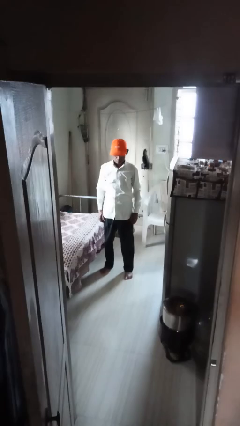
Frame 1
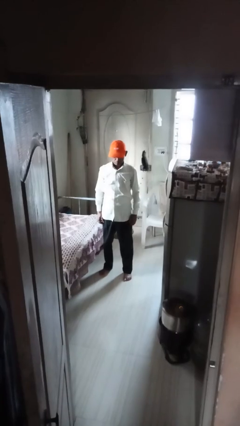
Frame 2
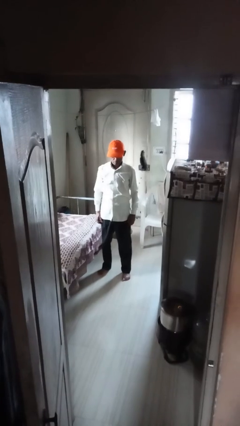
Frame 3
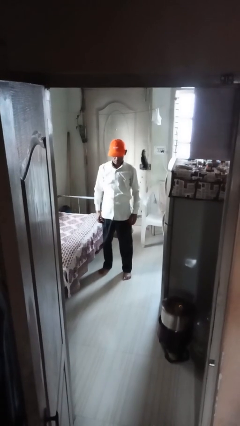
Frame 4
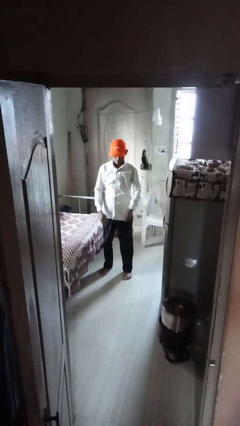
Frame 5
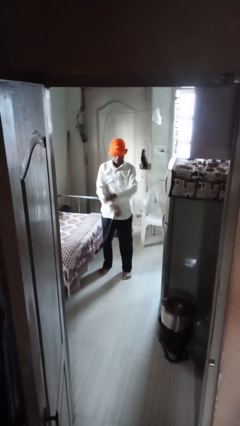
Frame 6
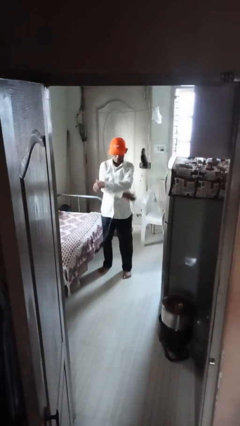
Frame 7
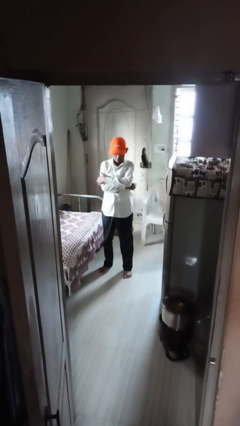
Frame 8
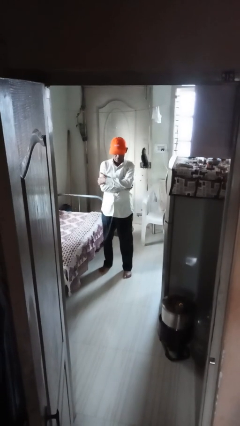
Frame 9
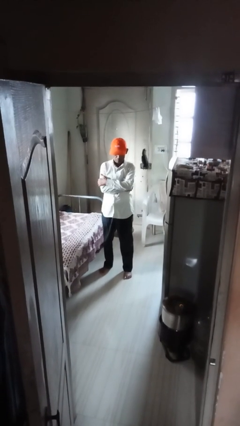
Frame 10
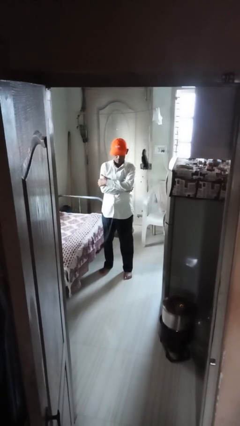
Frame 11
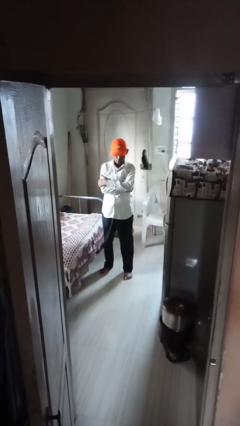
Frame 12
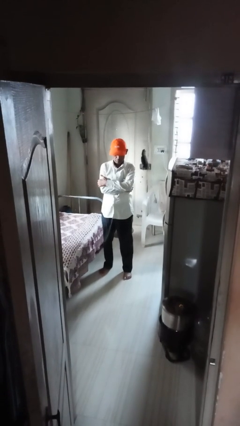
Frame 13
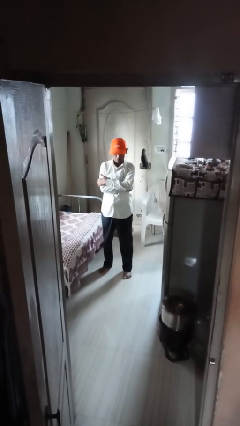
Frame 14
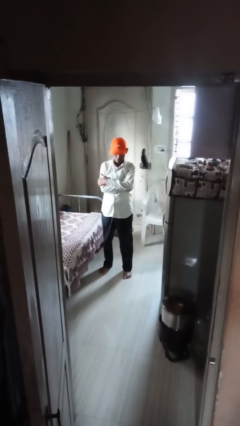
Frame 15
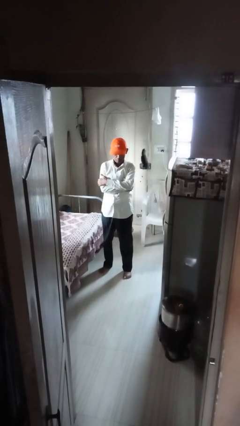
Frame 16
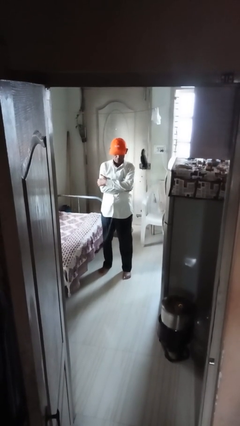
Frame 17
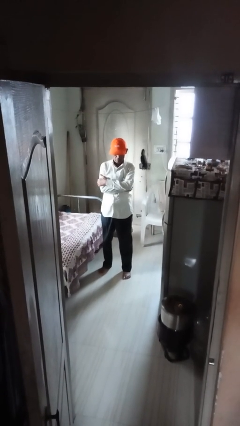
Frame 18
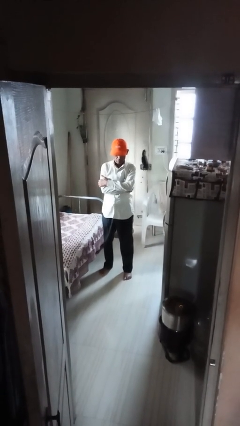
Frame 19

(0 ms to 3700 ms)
person crosses arms

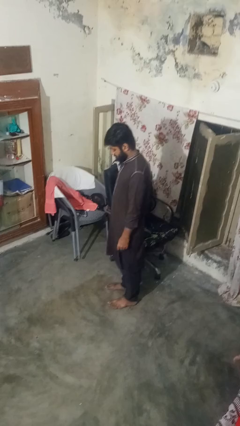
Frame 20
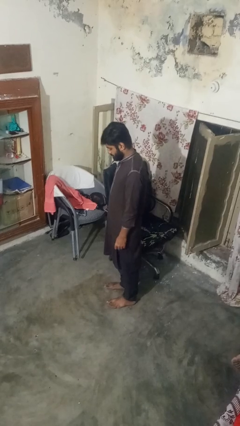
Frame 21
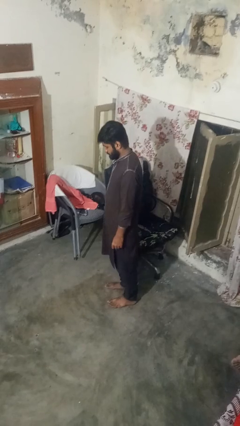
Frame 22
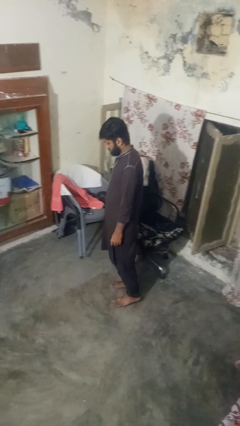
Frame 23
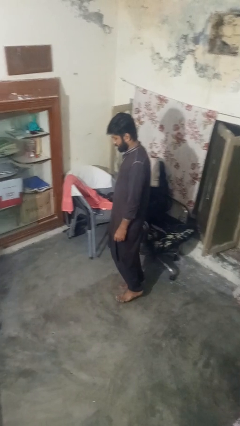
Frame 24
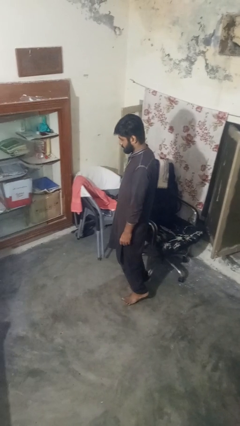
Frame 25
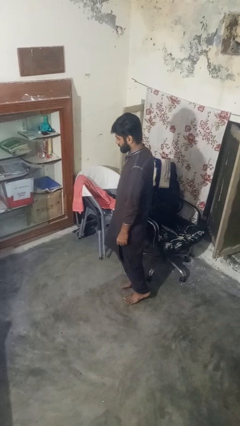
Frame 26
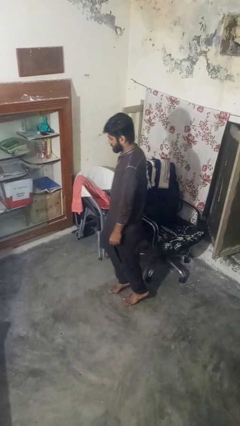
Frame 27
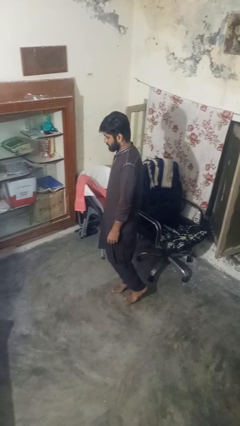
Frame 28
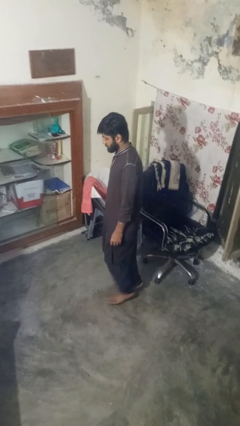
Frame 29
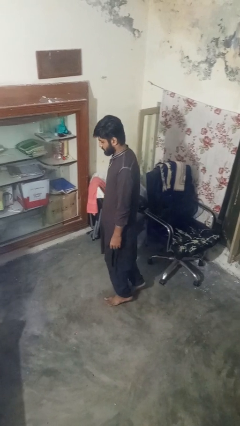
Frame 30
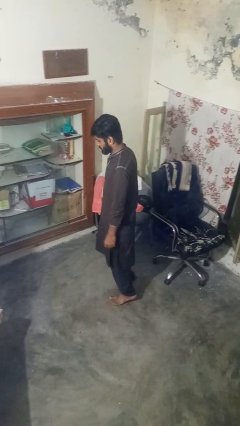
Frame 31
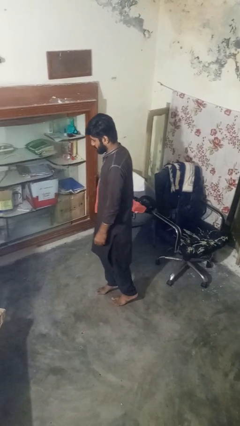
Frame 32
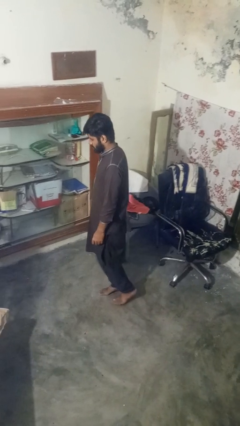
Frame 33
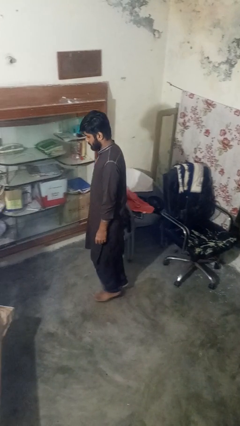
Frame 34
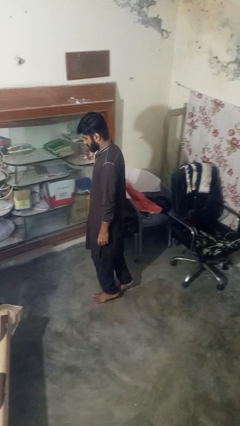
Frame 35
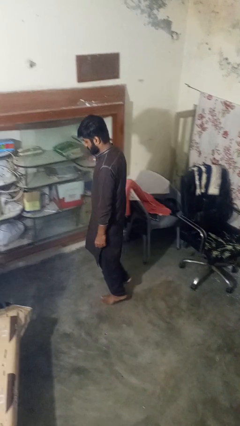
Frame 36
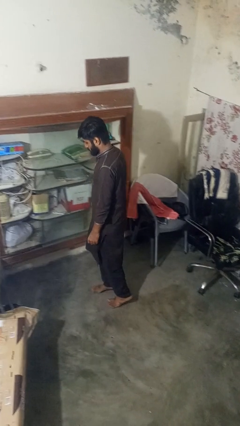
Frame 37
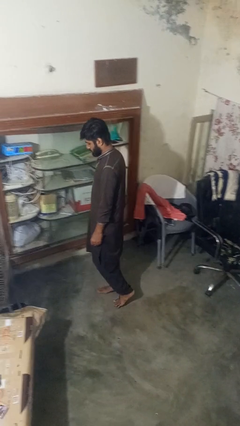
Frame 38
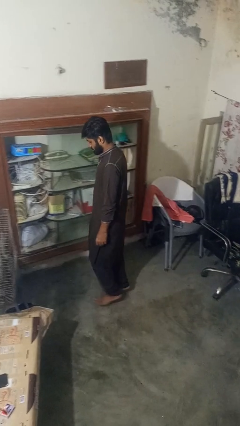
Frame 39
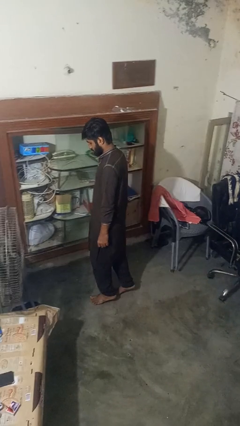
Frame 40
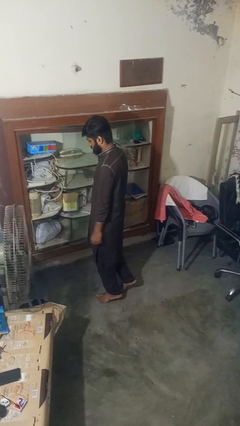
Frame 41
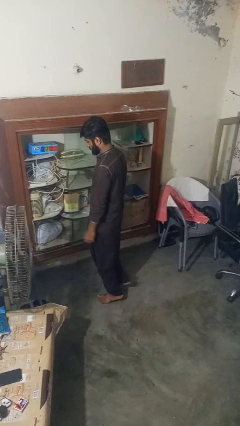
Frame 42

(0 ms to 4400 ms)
person walks tiptoe

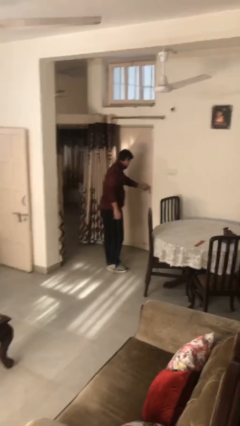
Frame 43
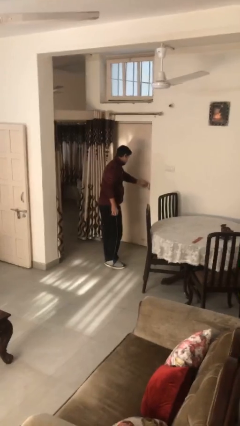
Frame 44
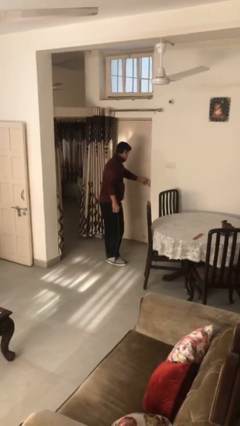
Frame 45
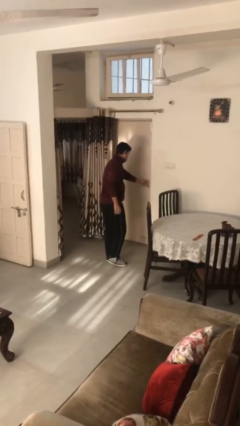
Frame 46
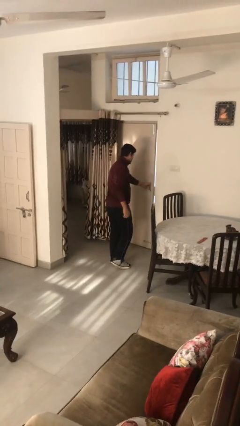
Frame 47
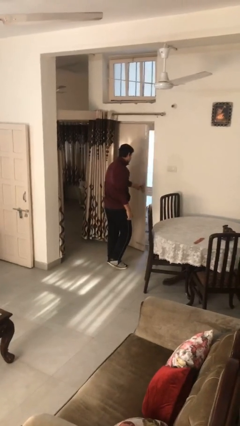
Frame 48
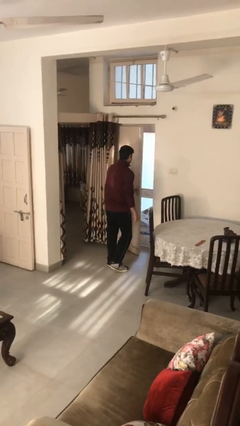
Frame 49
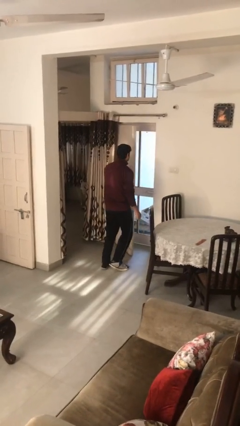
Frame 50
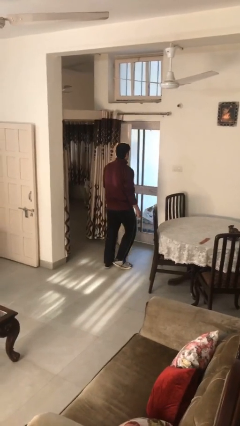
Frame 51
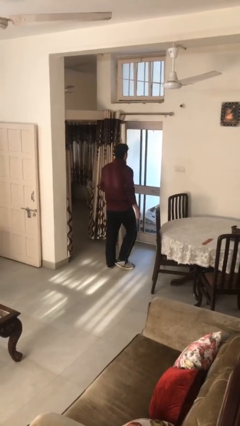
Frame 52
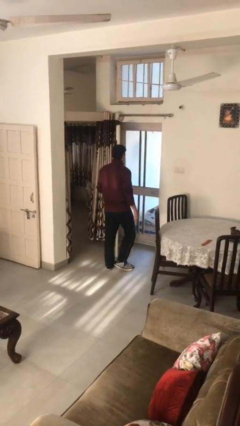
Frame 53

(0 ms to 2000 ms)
person opens facility door

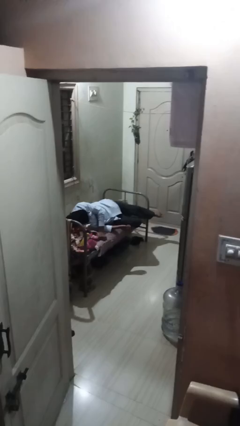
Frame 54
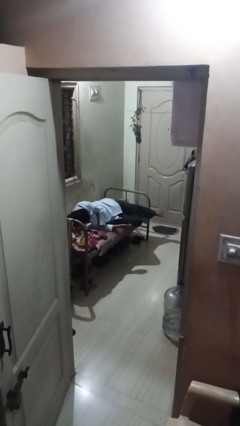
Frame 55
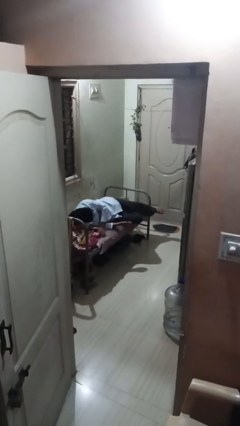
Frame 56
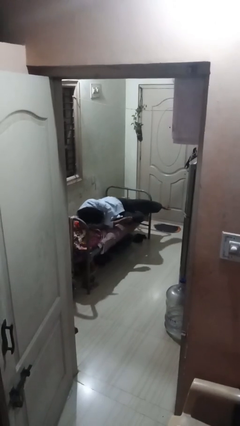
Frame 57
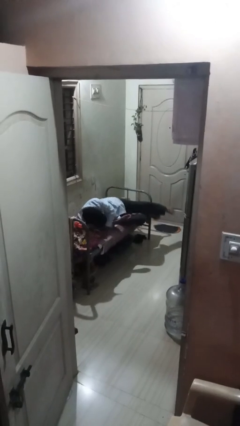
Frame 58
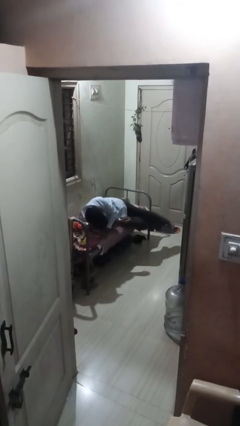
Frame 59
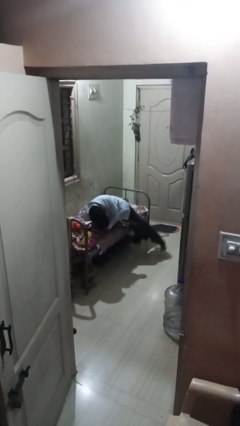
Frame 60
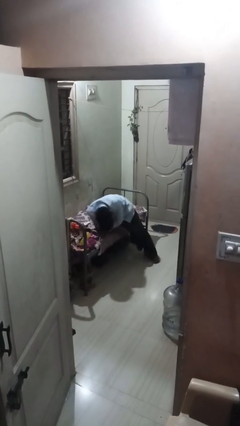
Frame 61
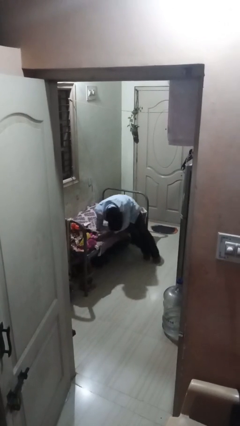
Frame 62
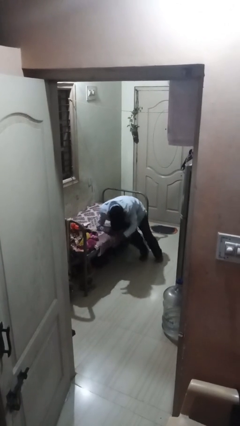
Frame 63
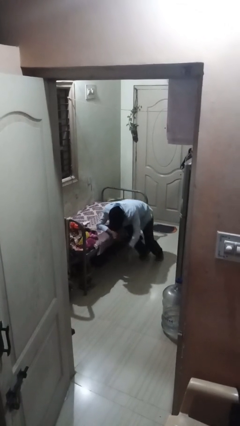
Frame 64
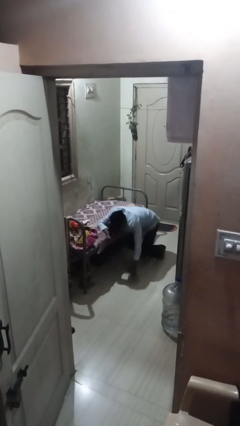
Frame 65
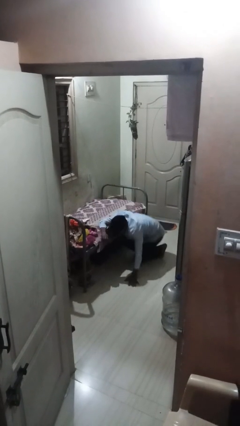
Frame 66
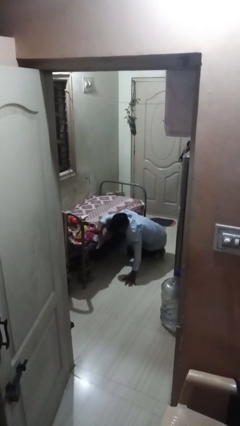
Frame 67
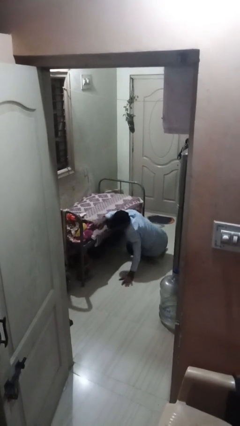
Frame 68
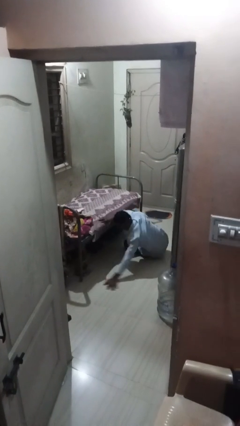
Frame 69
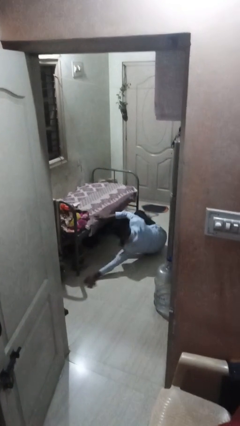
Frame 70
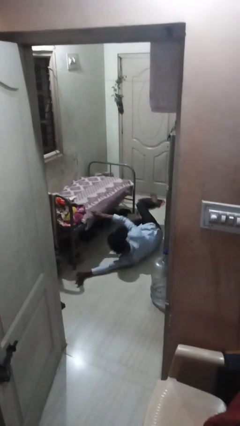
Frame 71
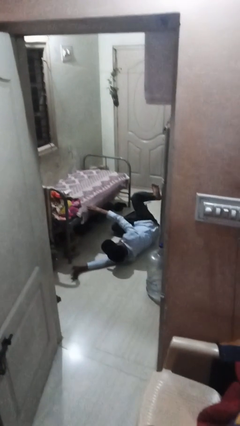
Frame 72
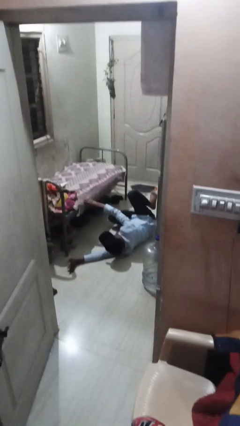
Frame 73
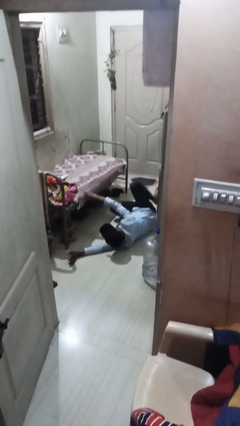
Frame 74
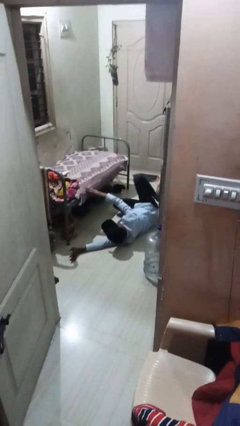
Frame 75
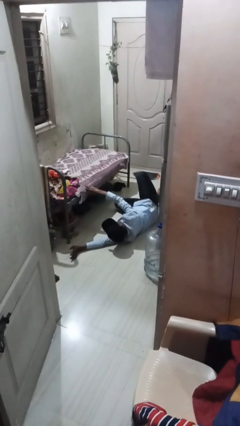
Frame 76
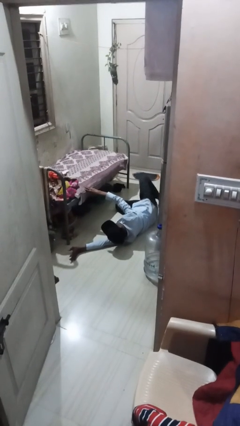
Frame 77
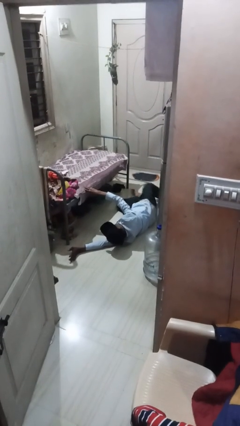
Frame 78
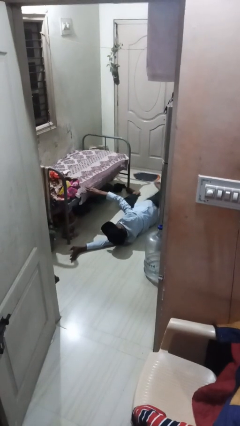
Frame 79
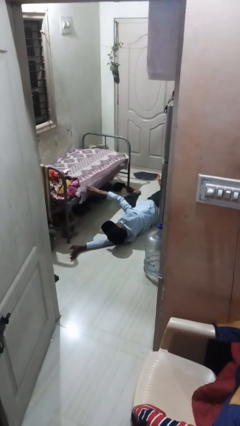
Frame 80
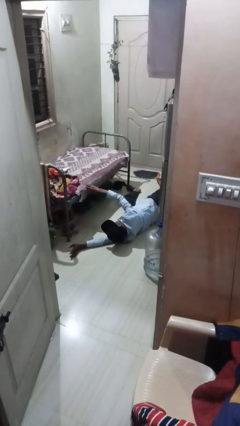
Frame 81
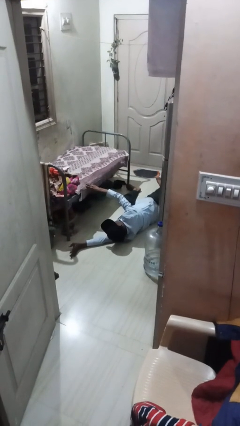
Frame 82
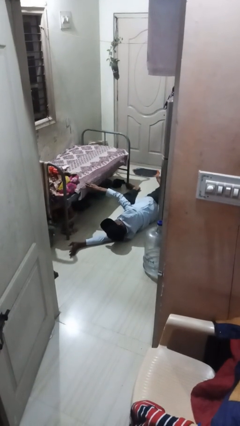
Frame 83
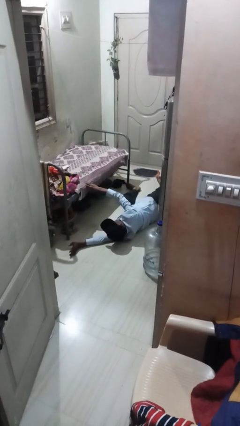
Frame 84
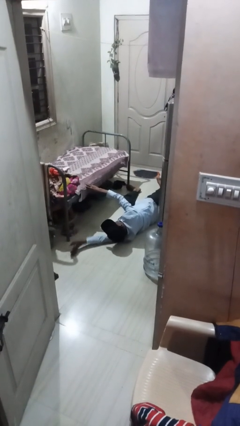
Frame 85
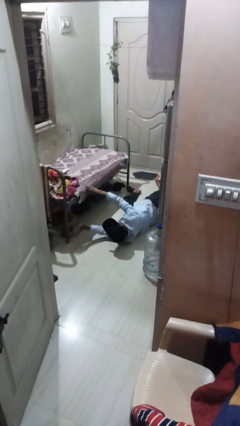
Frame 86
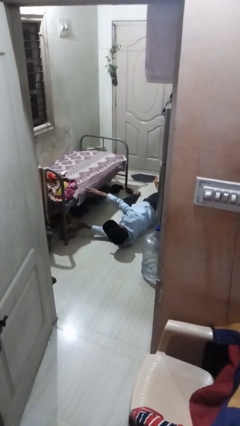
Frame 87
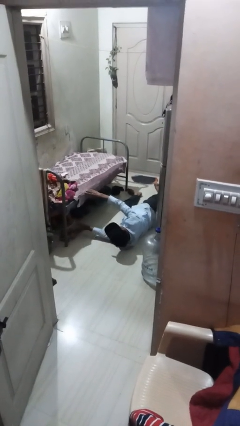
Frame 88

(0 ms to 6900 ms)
person falls from bed

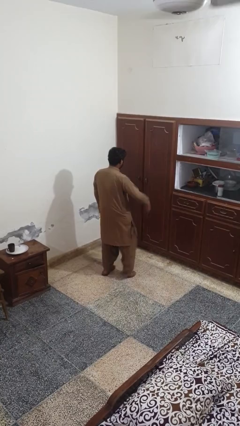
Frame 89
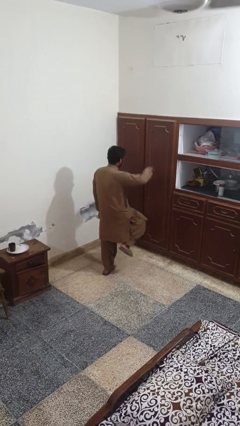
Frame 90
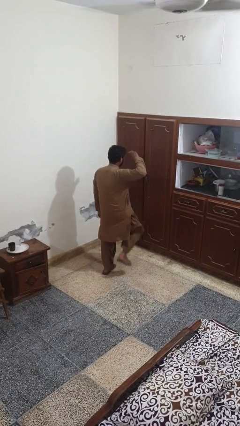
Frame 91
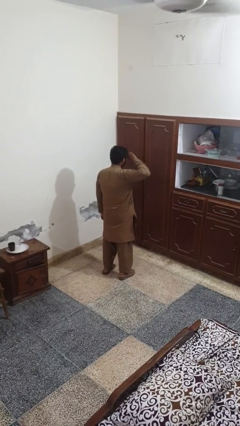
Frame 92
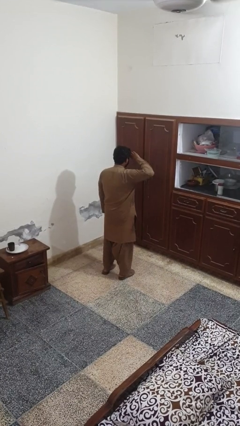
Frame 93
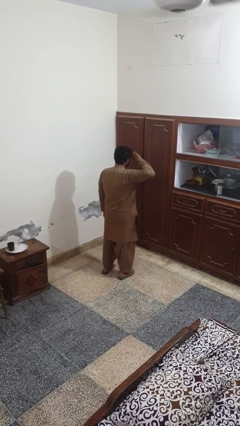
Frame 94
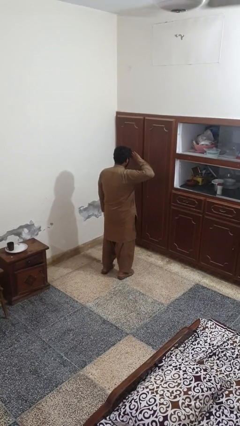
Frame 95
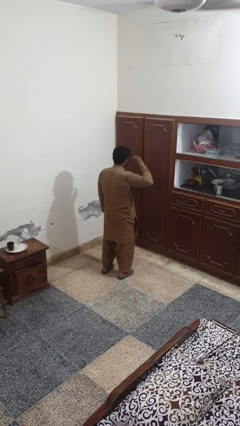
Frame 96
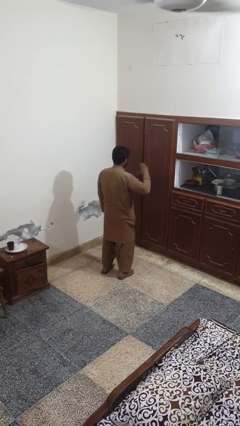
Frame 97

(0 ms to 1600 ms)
person salutes
